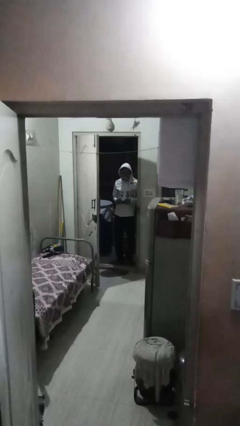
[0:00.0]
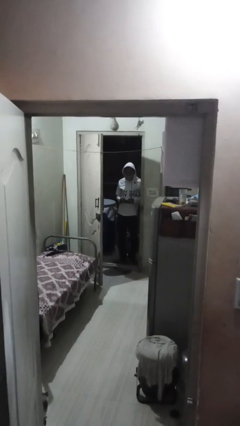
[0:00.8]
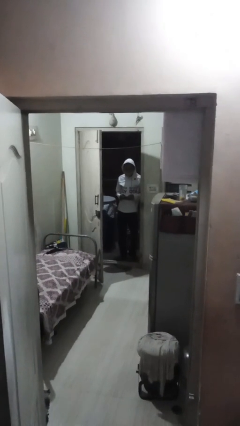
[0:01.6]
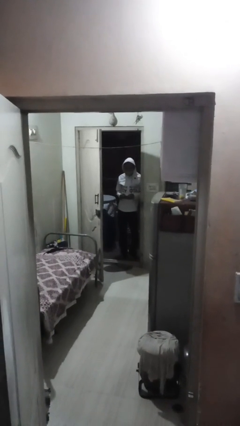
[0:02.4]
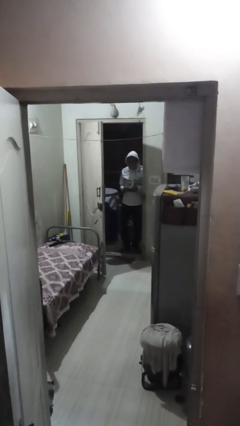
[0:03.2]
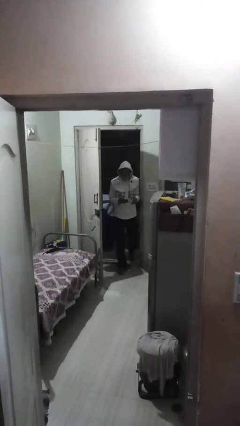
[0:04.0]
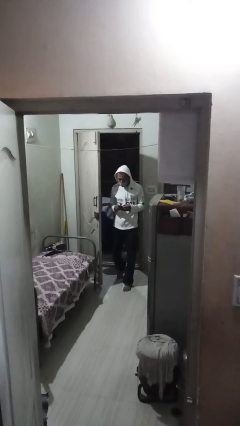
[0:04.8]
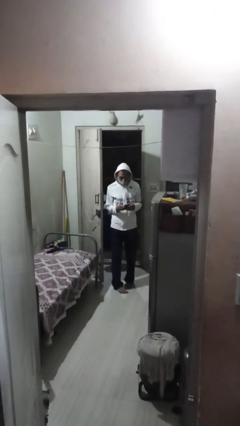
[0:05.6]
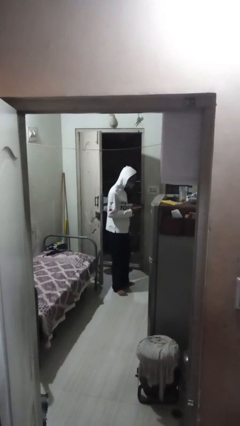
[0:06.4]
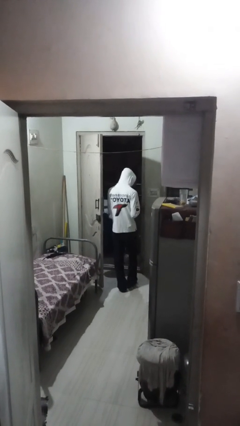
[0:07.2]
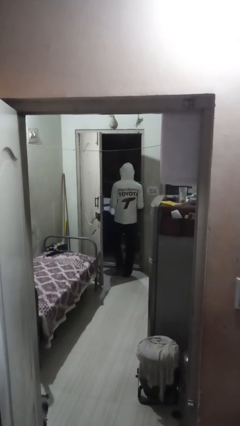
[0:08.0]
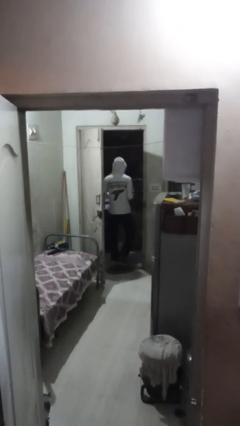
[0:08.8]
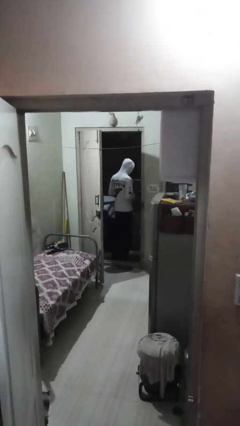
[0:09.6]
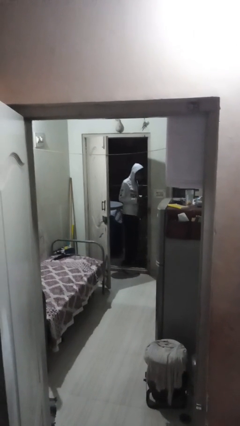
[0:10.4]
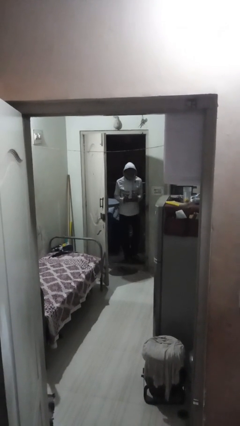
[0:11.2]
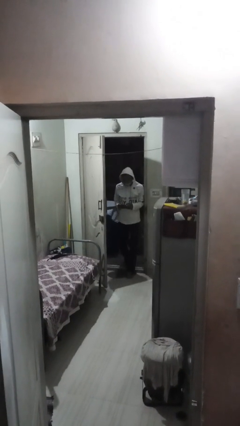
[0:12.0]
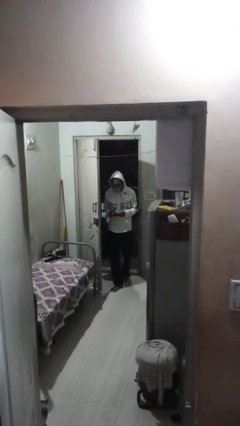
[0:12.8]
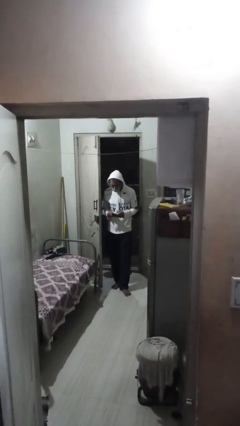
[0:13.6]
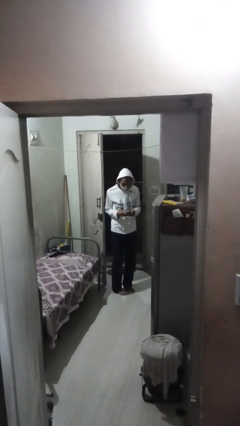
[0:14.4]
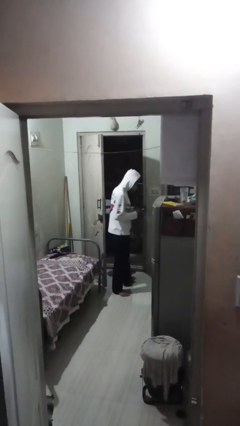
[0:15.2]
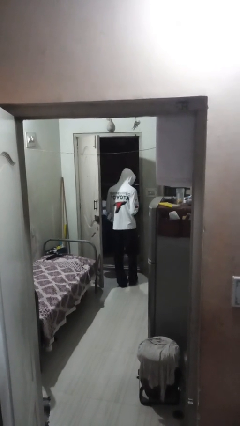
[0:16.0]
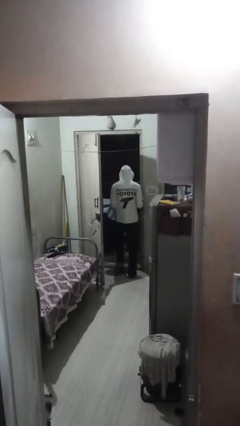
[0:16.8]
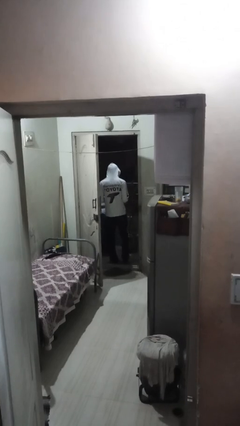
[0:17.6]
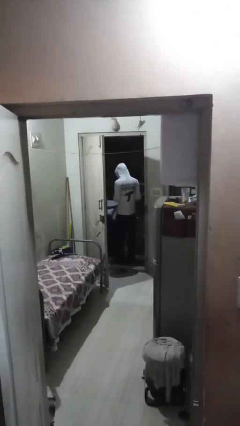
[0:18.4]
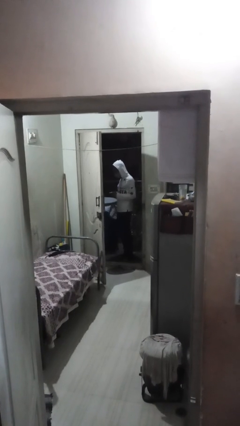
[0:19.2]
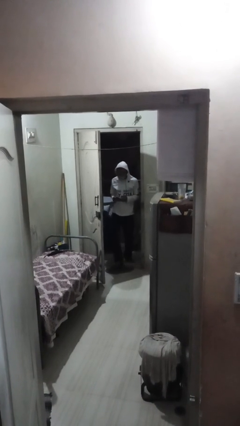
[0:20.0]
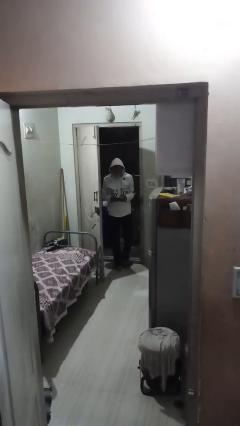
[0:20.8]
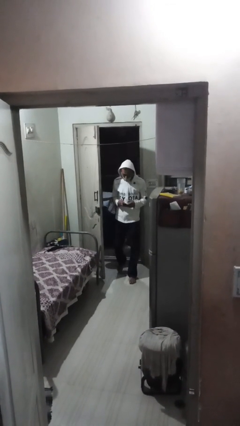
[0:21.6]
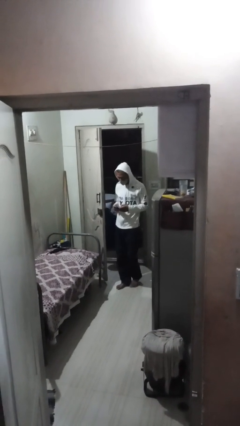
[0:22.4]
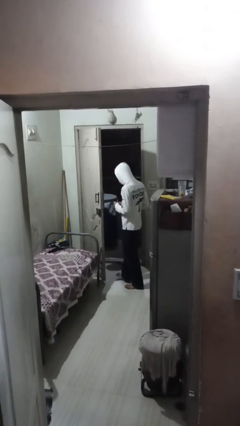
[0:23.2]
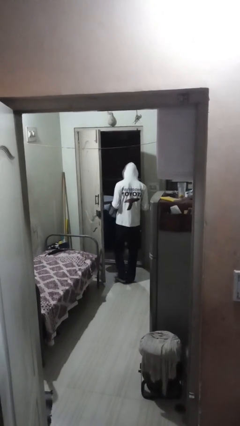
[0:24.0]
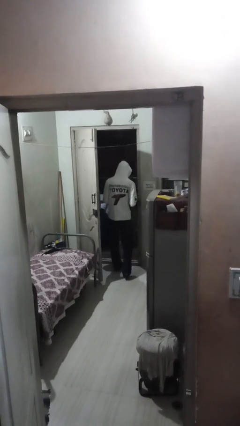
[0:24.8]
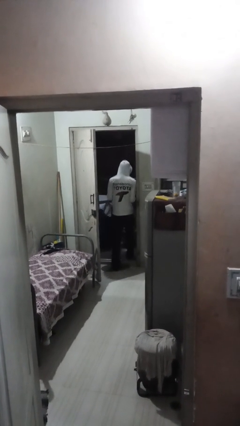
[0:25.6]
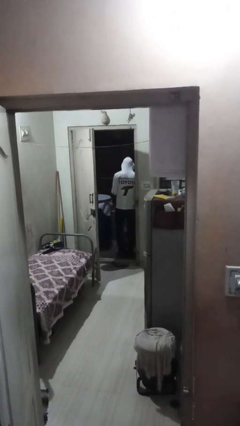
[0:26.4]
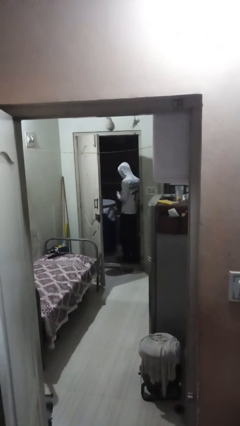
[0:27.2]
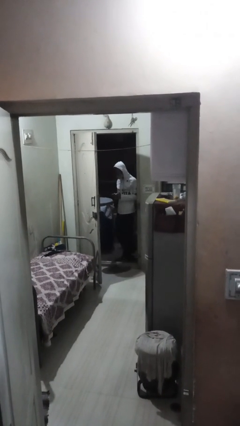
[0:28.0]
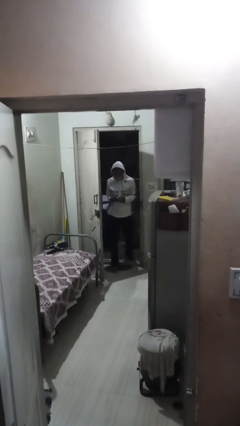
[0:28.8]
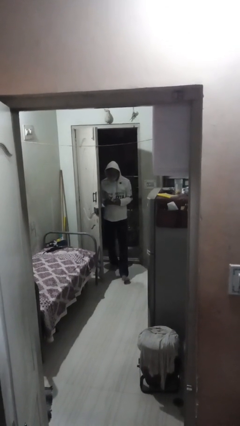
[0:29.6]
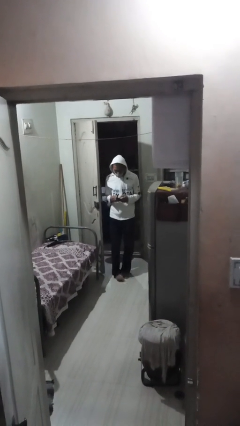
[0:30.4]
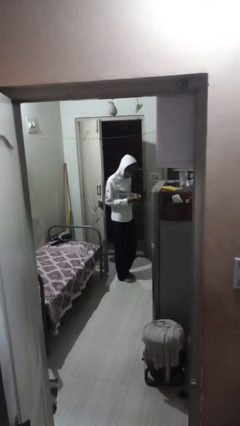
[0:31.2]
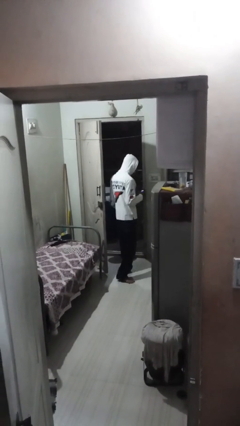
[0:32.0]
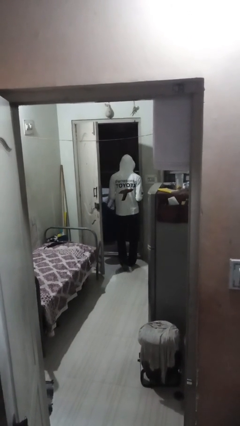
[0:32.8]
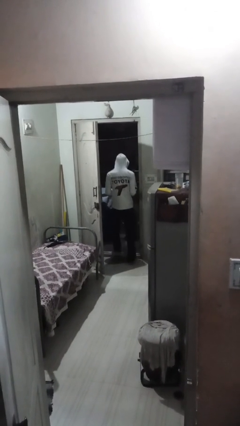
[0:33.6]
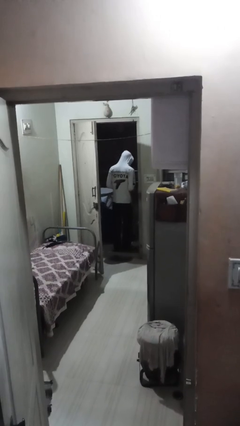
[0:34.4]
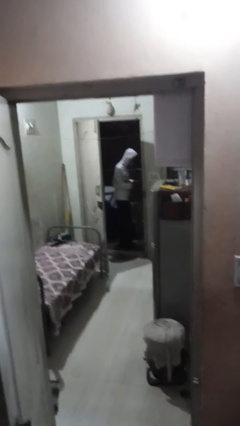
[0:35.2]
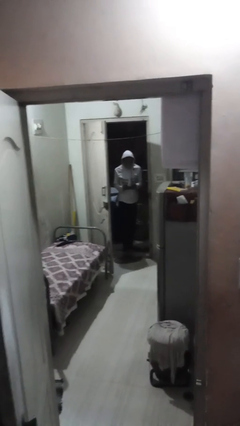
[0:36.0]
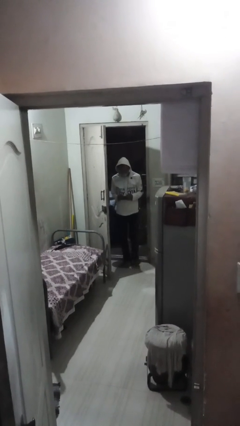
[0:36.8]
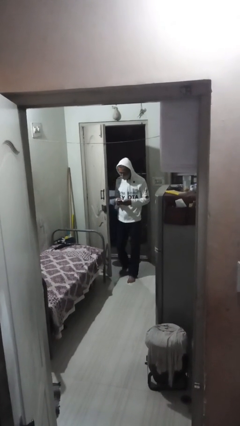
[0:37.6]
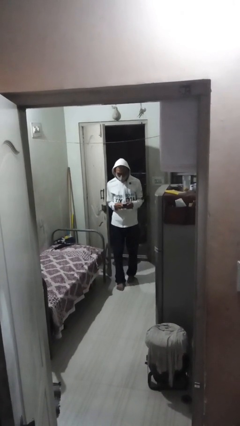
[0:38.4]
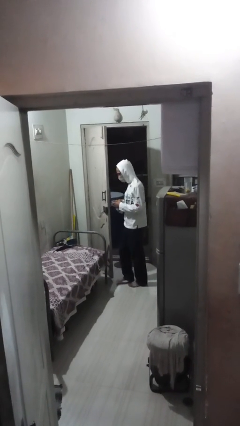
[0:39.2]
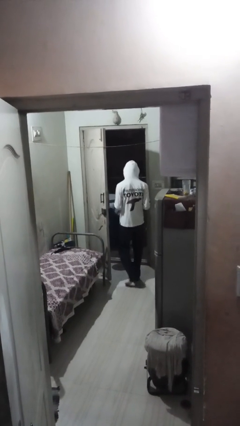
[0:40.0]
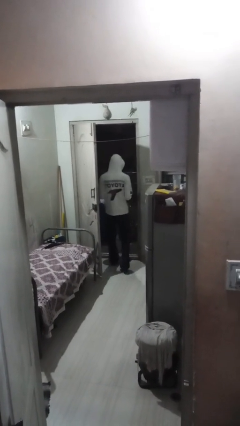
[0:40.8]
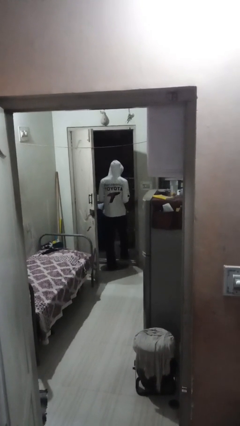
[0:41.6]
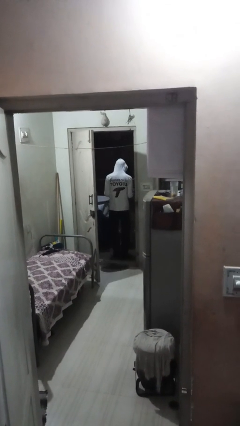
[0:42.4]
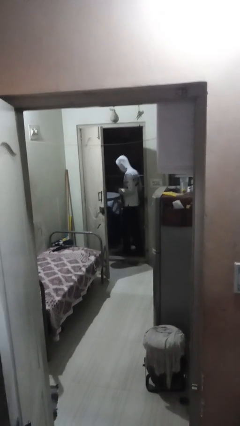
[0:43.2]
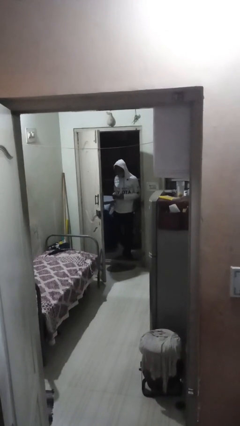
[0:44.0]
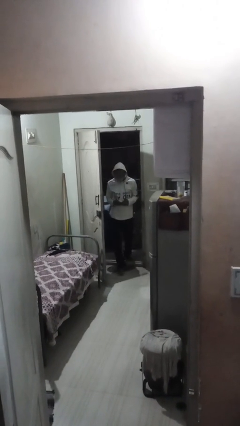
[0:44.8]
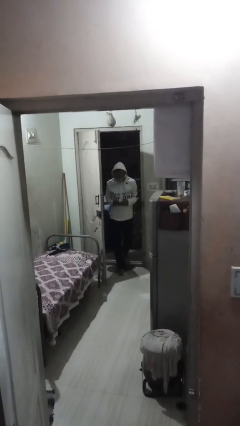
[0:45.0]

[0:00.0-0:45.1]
person texts on phone

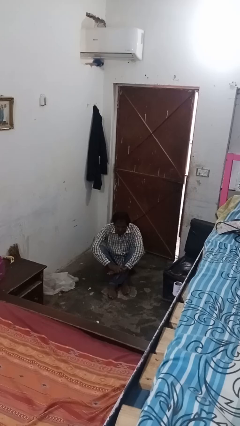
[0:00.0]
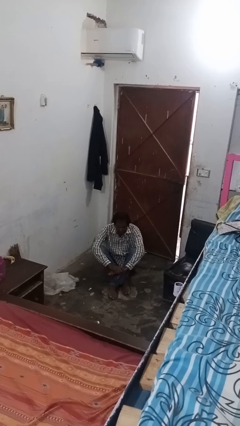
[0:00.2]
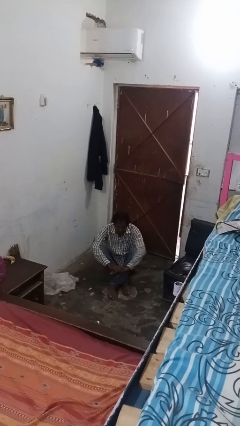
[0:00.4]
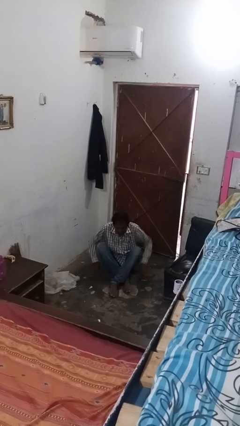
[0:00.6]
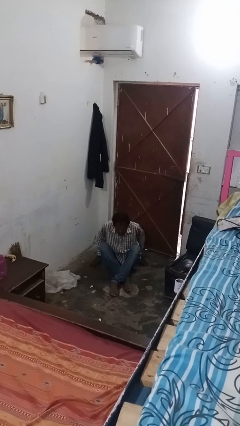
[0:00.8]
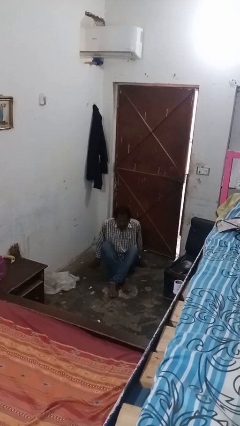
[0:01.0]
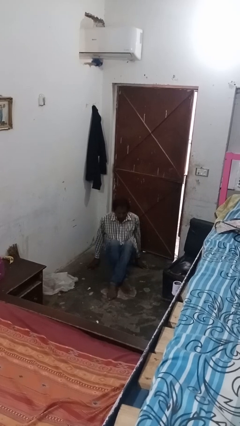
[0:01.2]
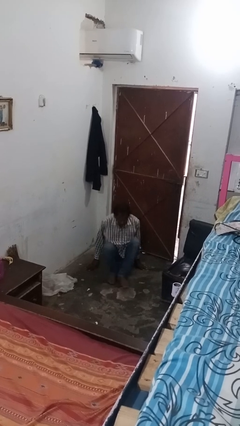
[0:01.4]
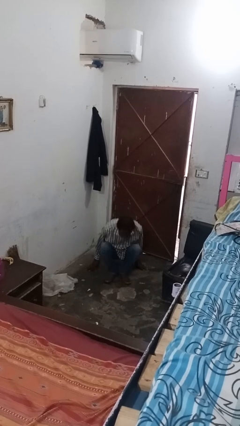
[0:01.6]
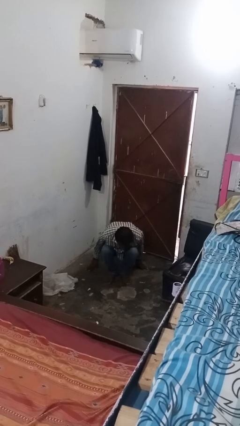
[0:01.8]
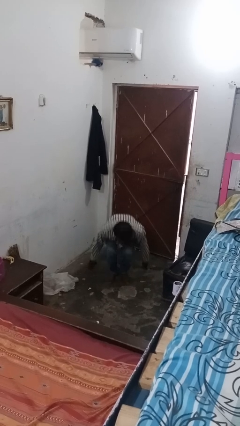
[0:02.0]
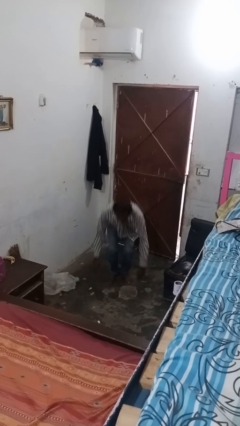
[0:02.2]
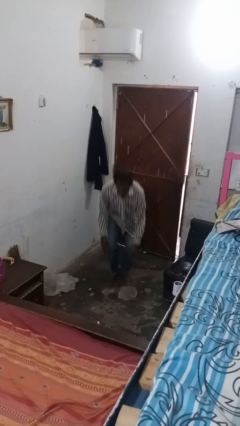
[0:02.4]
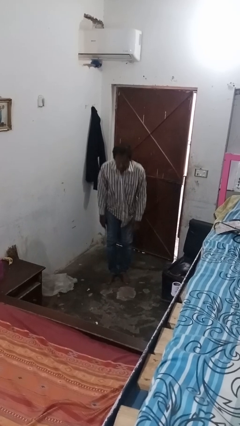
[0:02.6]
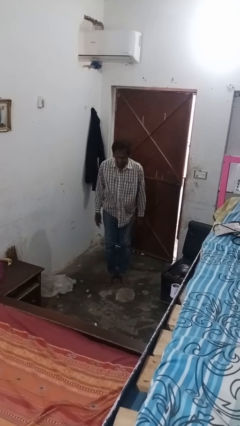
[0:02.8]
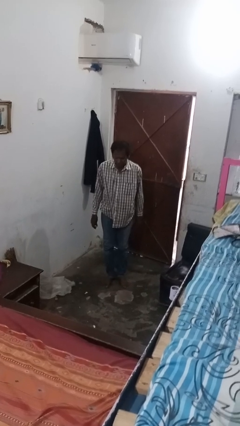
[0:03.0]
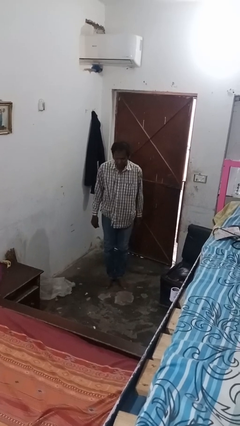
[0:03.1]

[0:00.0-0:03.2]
person stands up from floor

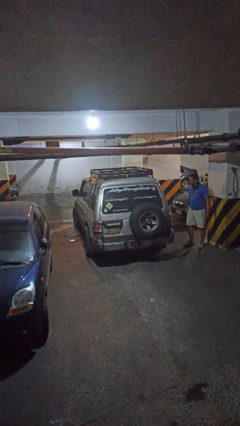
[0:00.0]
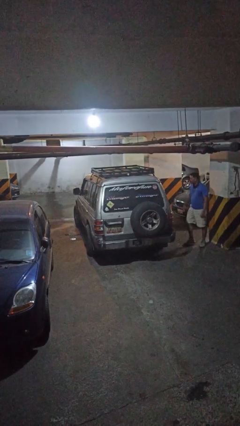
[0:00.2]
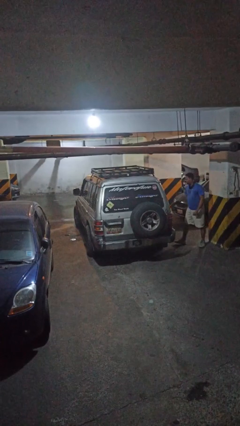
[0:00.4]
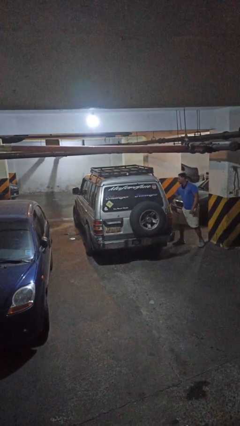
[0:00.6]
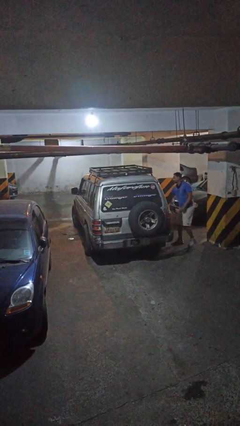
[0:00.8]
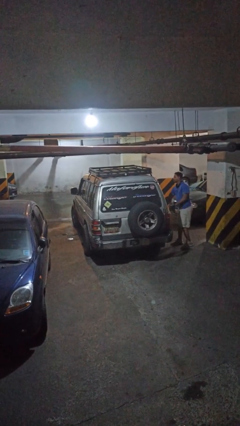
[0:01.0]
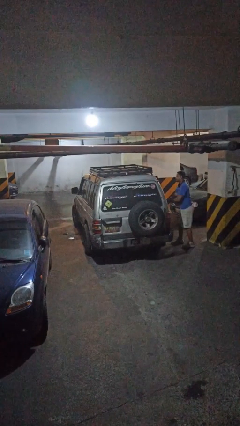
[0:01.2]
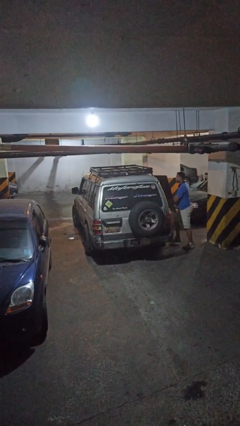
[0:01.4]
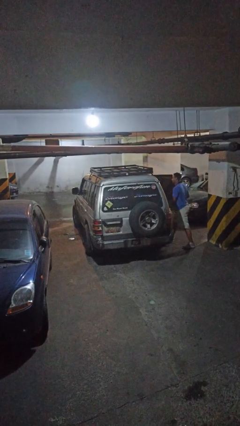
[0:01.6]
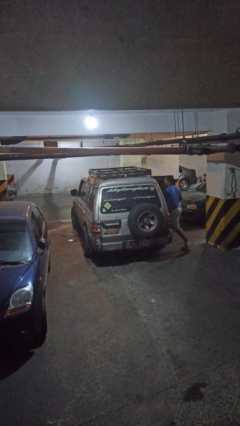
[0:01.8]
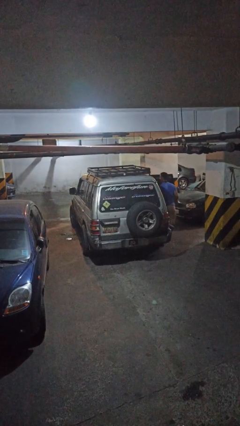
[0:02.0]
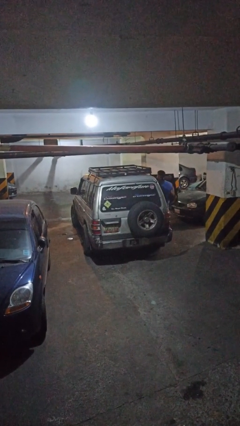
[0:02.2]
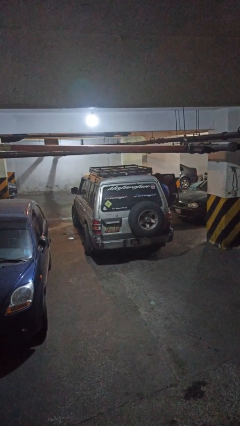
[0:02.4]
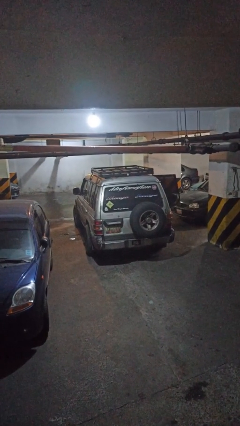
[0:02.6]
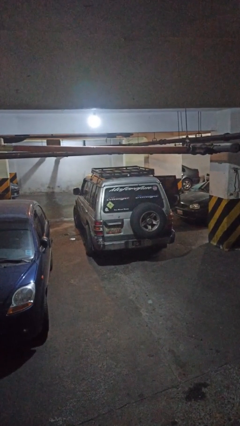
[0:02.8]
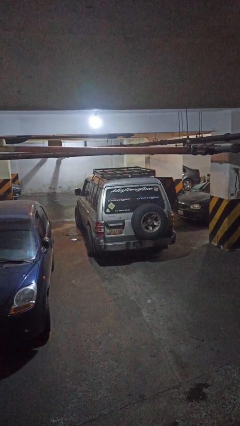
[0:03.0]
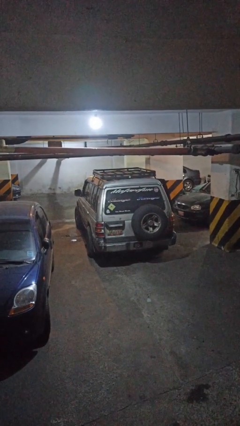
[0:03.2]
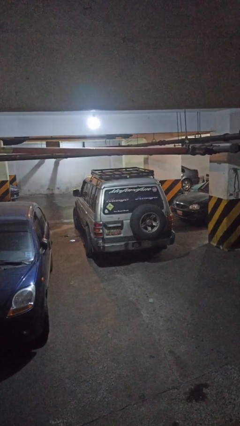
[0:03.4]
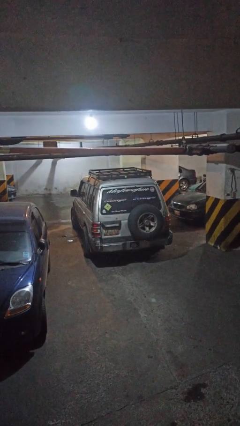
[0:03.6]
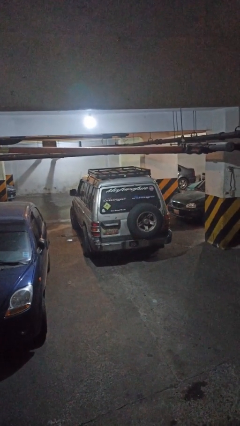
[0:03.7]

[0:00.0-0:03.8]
car picks up person
